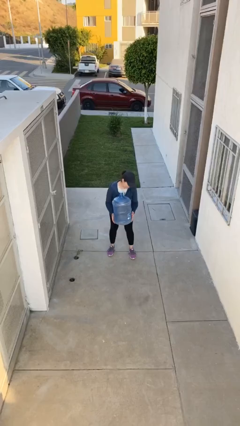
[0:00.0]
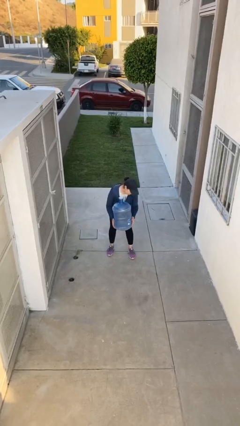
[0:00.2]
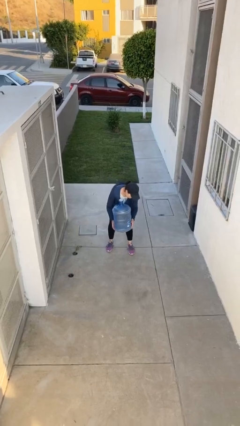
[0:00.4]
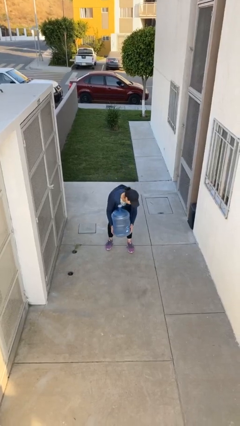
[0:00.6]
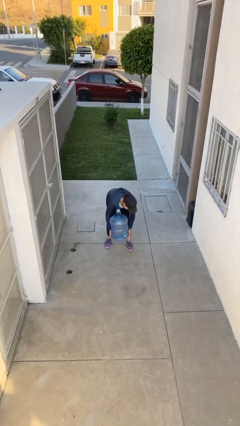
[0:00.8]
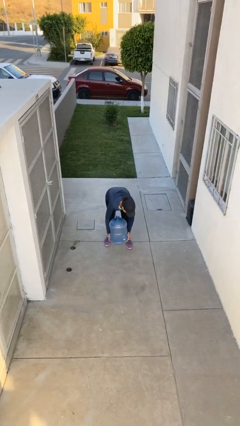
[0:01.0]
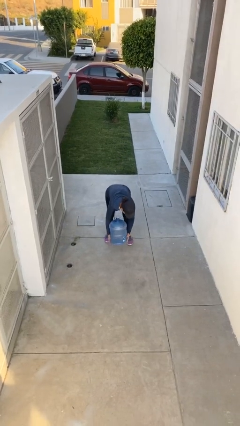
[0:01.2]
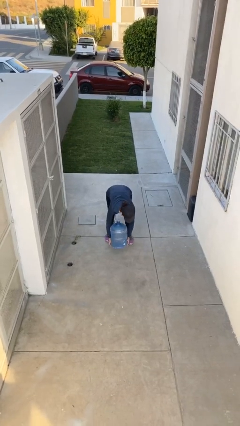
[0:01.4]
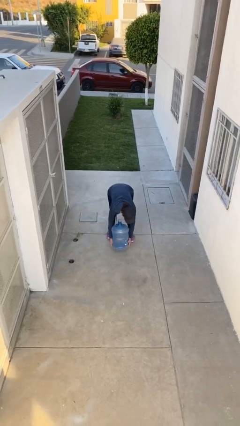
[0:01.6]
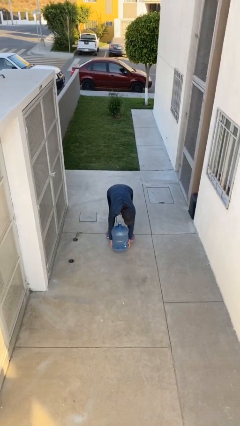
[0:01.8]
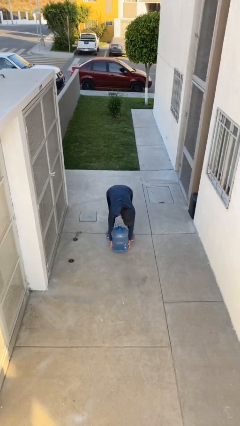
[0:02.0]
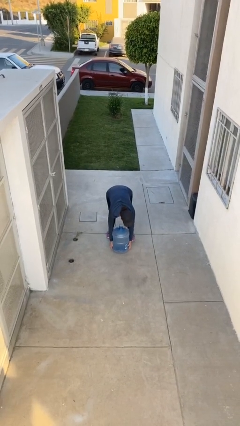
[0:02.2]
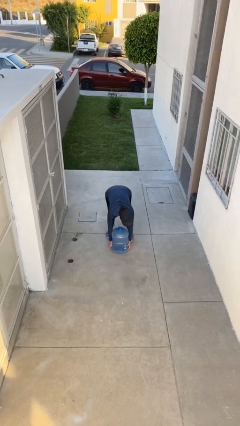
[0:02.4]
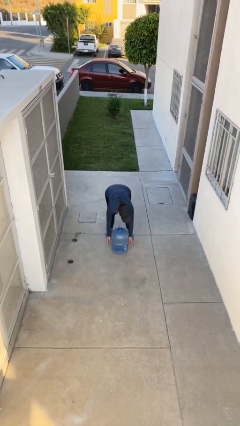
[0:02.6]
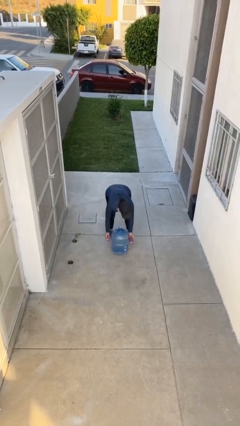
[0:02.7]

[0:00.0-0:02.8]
person puts down object on floor

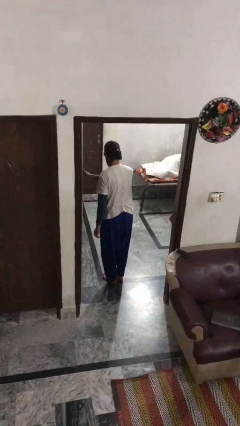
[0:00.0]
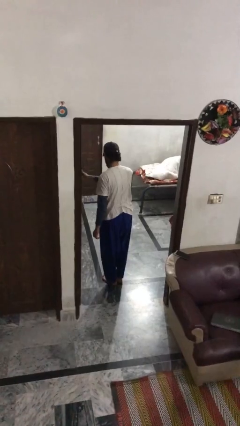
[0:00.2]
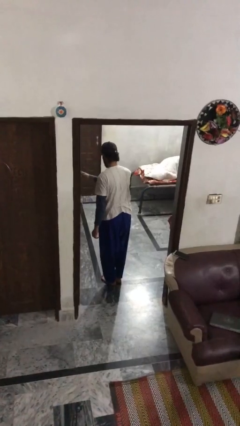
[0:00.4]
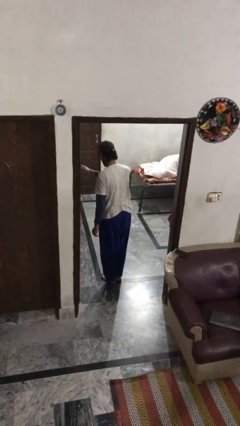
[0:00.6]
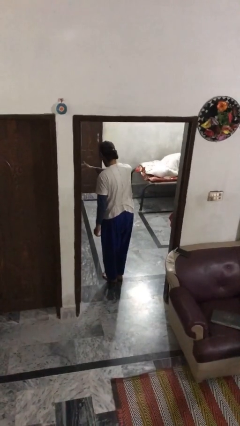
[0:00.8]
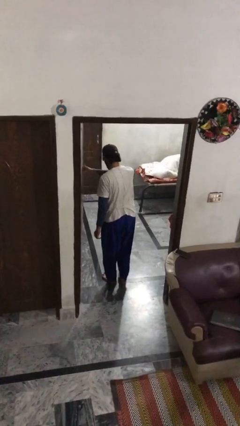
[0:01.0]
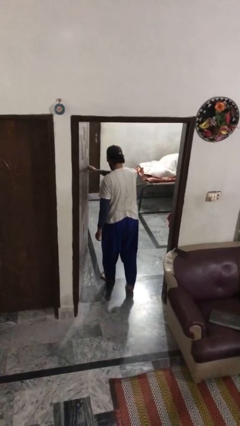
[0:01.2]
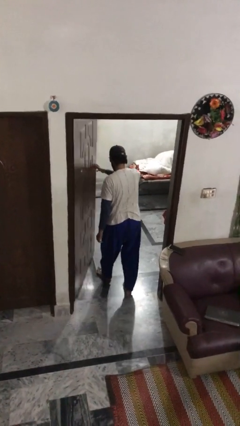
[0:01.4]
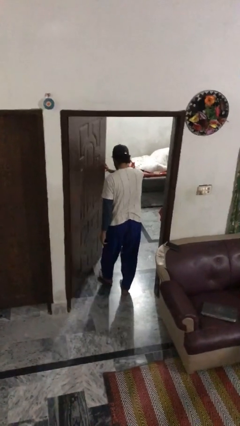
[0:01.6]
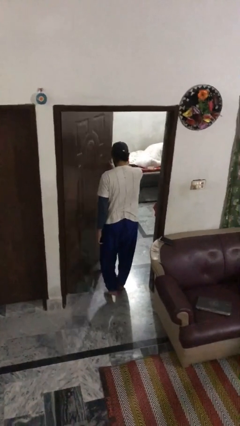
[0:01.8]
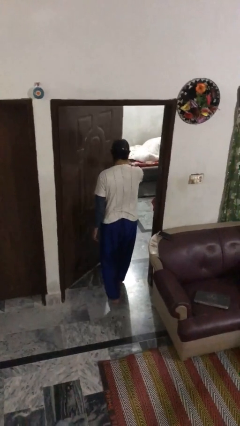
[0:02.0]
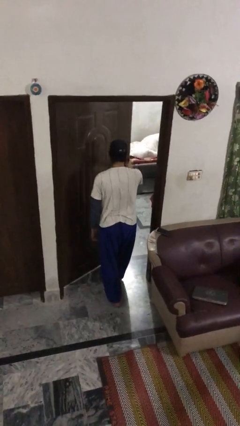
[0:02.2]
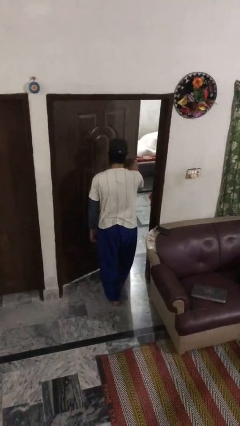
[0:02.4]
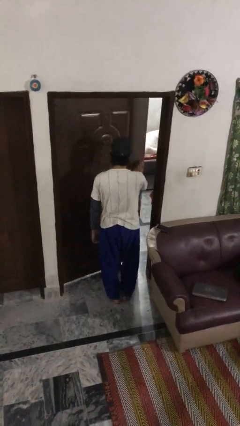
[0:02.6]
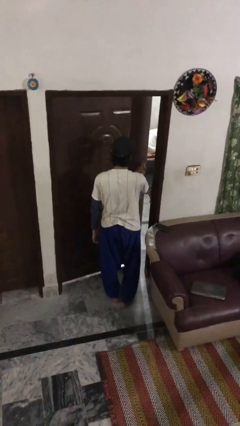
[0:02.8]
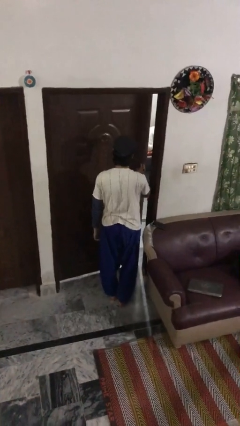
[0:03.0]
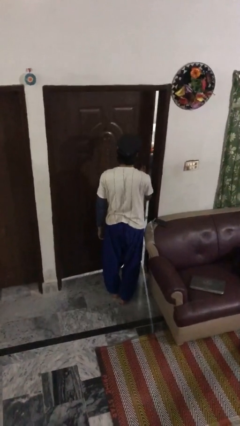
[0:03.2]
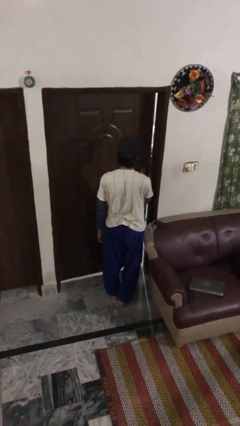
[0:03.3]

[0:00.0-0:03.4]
person closes facility door

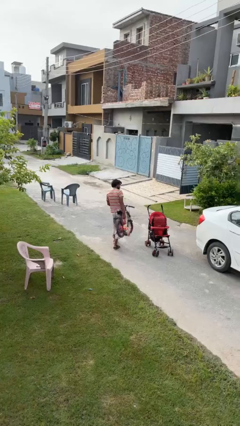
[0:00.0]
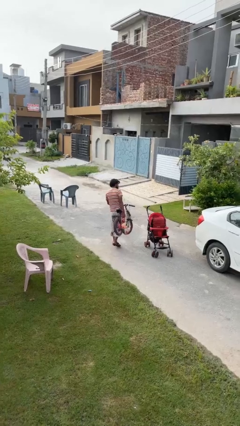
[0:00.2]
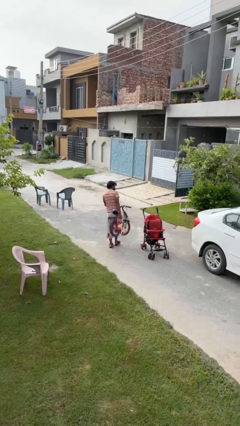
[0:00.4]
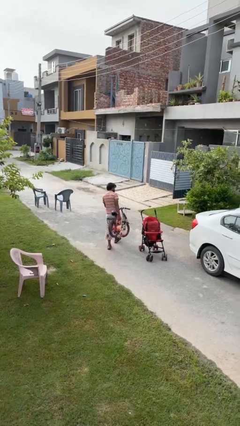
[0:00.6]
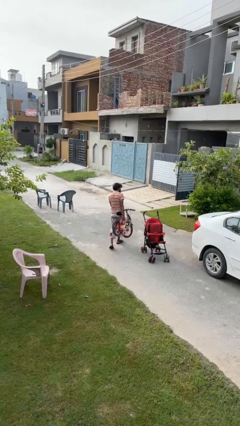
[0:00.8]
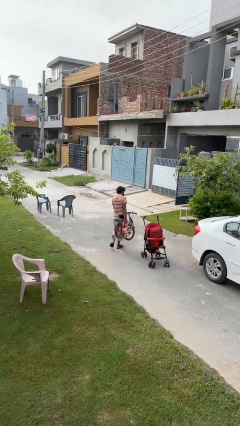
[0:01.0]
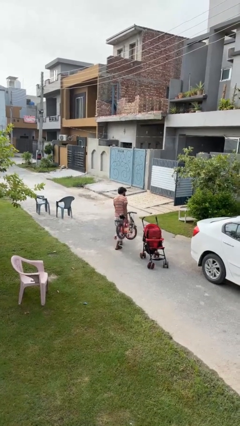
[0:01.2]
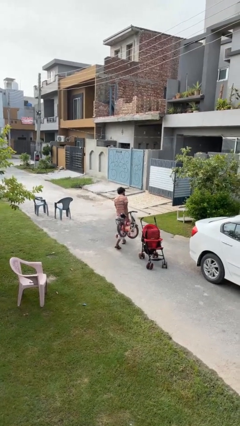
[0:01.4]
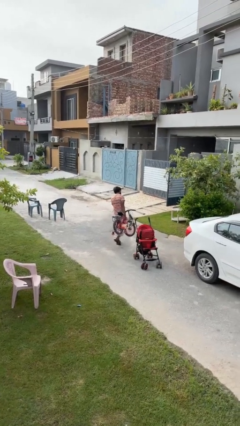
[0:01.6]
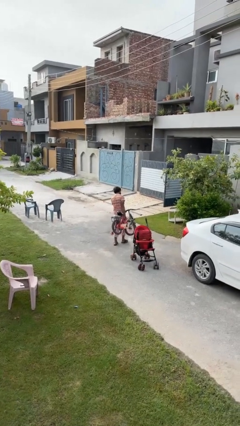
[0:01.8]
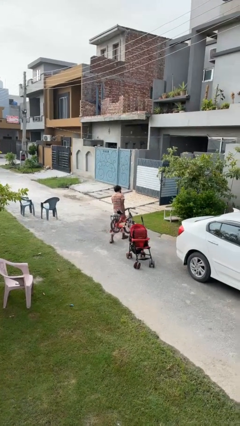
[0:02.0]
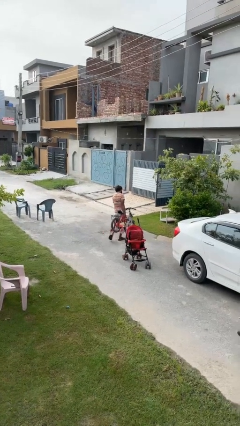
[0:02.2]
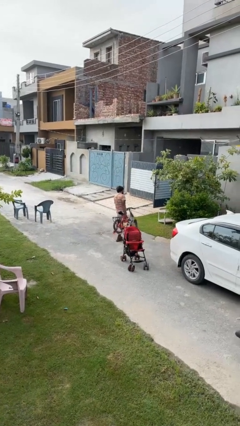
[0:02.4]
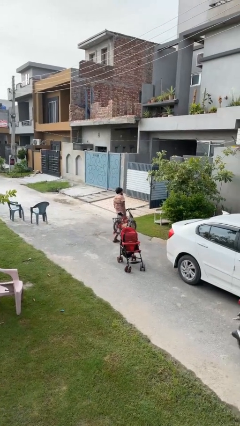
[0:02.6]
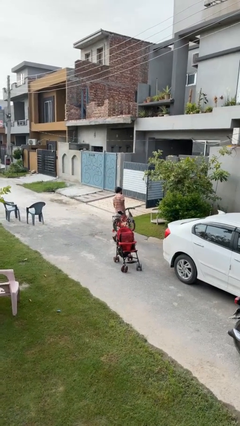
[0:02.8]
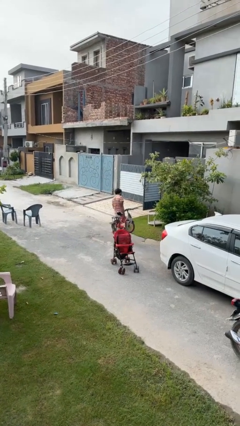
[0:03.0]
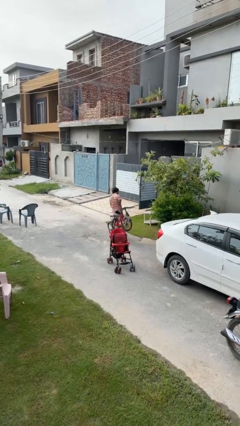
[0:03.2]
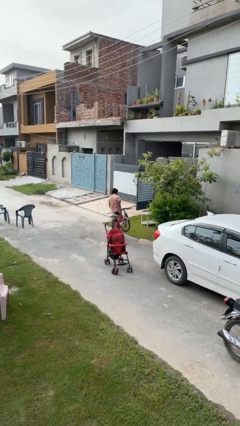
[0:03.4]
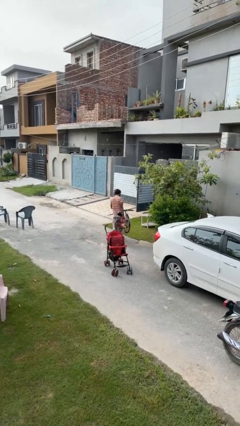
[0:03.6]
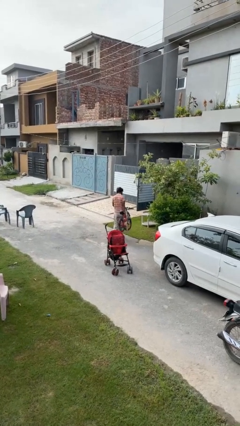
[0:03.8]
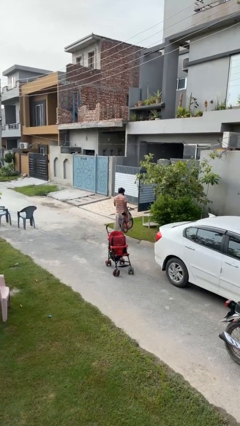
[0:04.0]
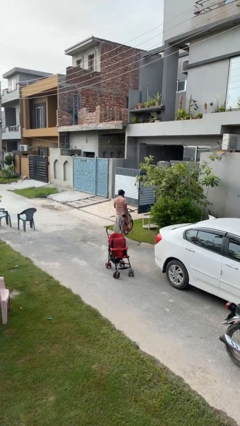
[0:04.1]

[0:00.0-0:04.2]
person carries bicycle

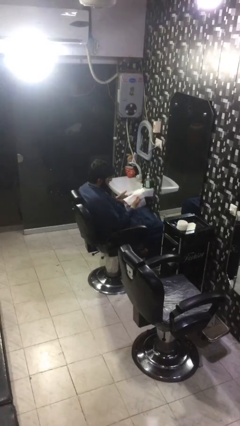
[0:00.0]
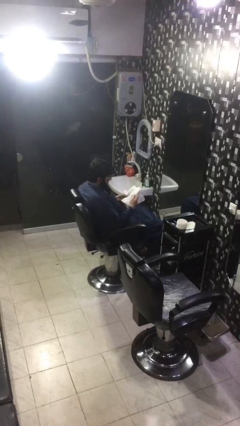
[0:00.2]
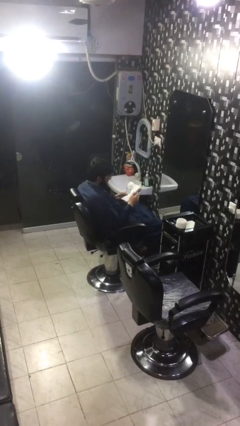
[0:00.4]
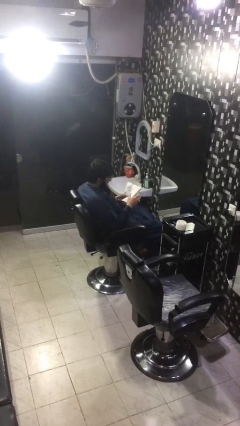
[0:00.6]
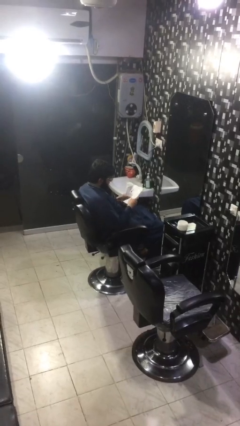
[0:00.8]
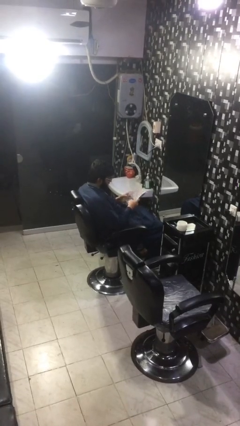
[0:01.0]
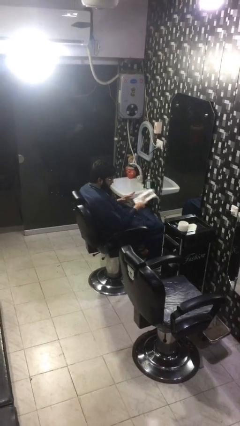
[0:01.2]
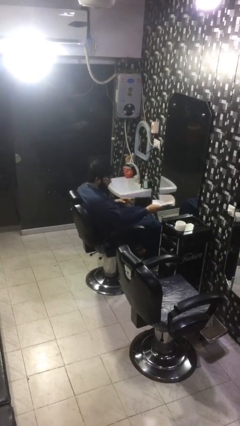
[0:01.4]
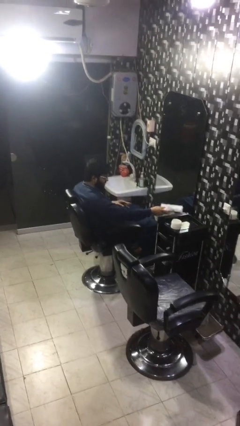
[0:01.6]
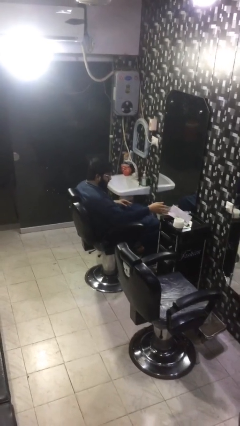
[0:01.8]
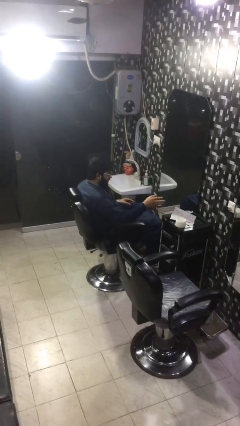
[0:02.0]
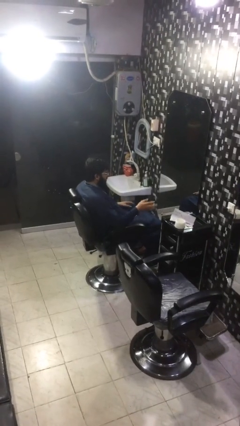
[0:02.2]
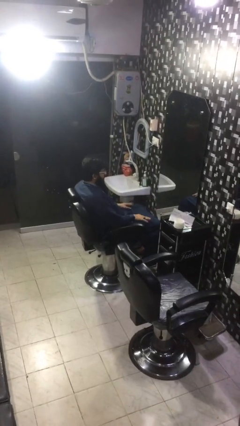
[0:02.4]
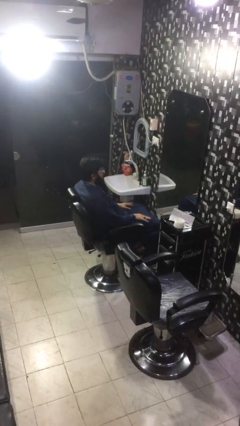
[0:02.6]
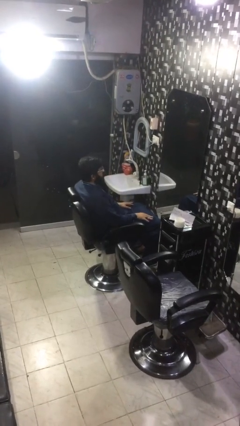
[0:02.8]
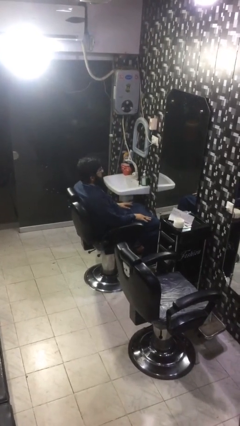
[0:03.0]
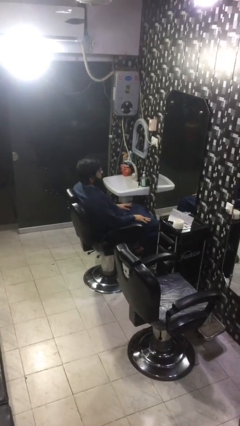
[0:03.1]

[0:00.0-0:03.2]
person puts down object on table

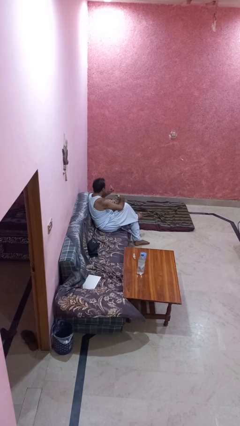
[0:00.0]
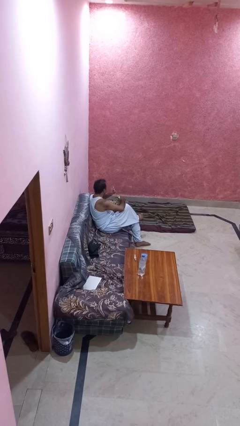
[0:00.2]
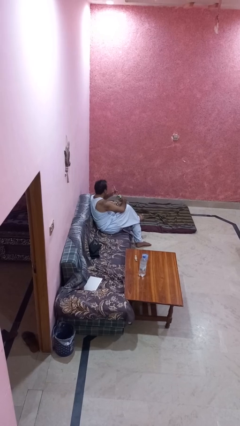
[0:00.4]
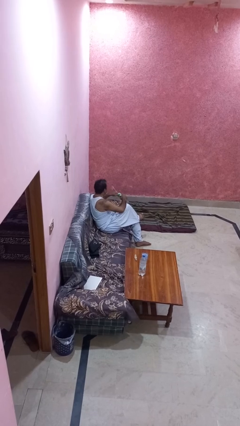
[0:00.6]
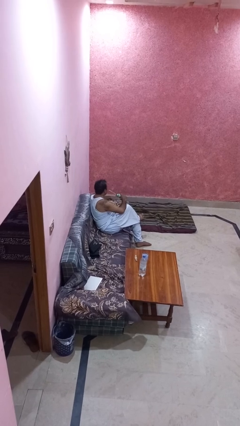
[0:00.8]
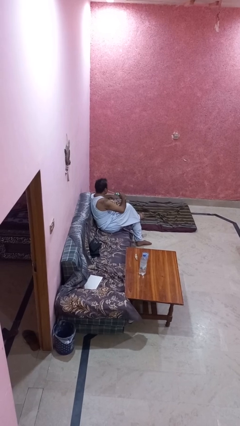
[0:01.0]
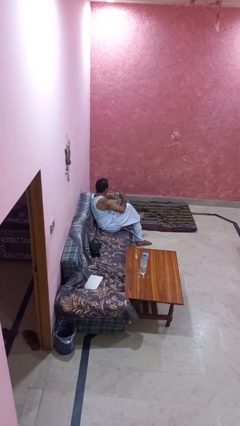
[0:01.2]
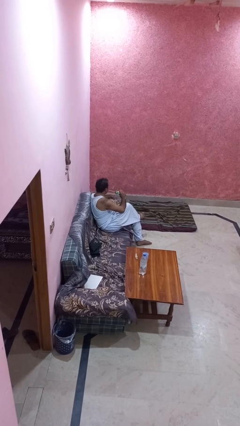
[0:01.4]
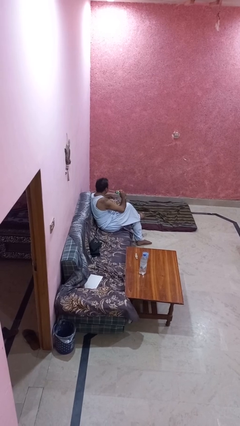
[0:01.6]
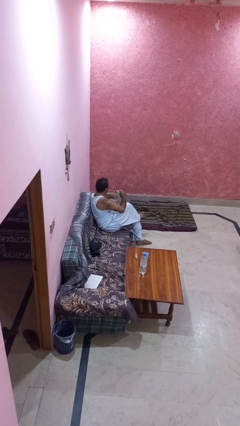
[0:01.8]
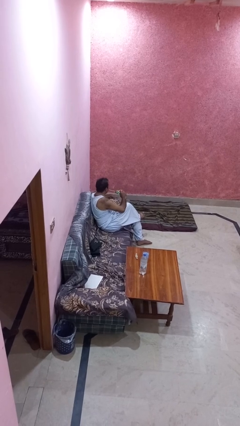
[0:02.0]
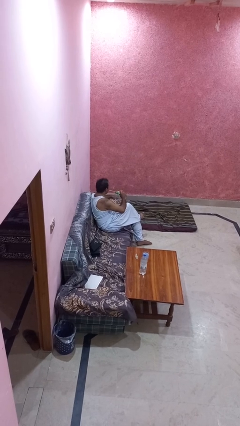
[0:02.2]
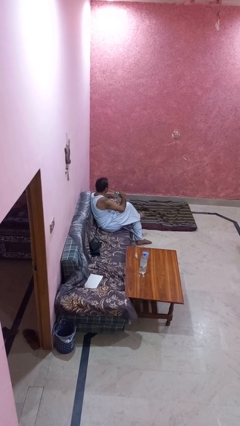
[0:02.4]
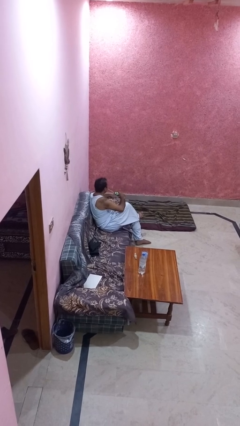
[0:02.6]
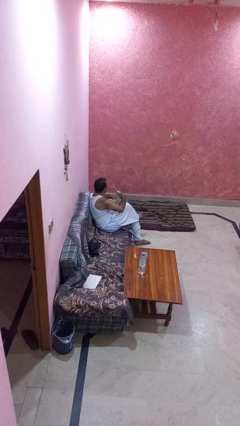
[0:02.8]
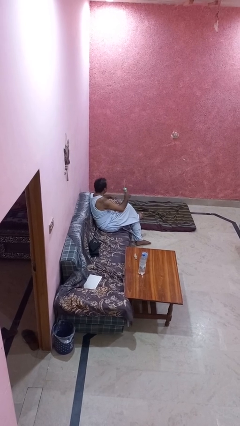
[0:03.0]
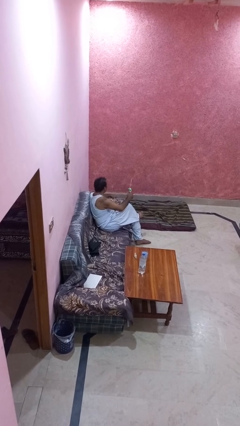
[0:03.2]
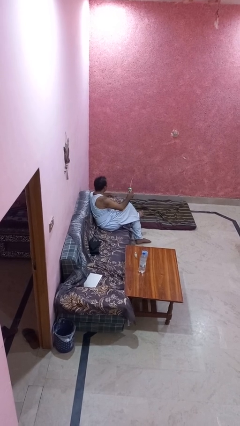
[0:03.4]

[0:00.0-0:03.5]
person drinks from straw

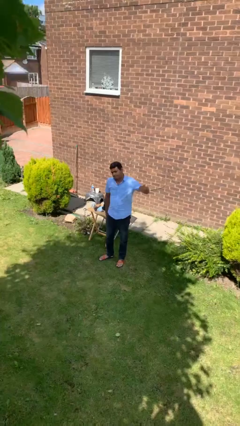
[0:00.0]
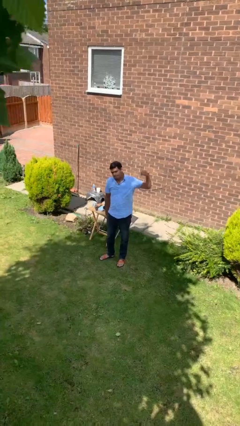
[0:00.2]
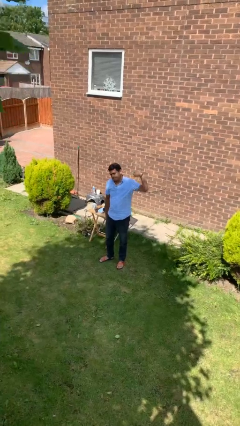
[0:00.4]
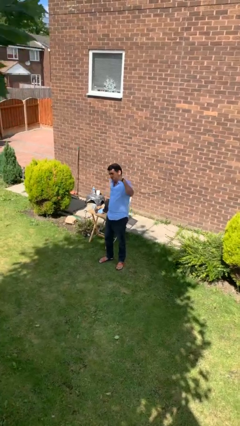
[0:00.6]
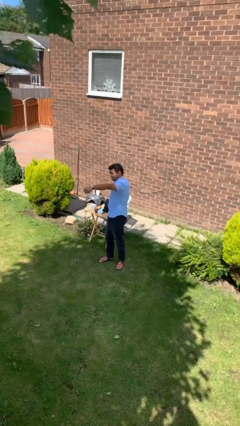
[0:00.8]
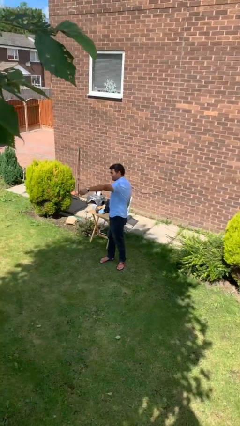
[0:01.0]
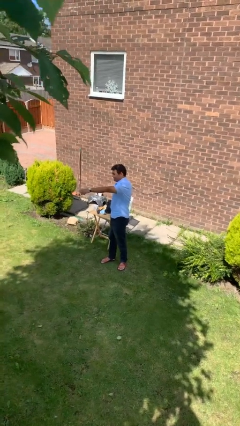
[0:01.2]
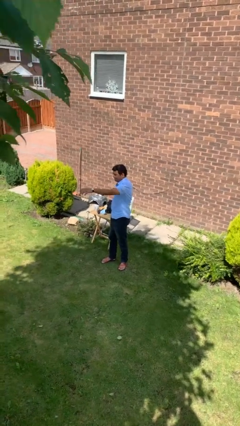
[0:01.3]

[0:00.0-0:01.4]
person punches
